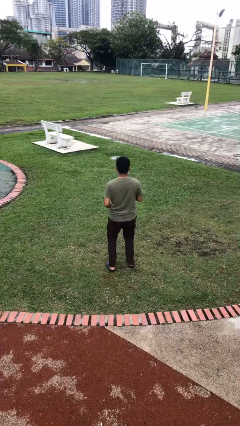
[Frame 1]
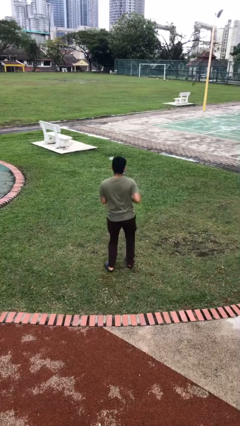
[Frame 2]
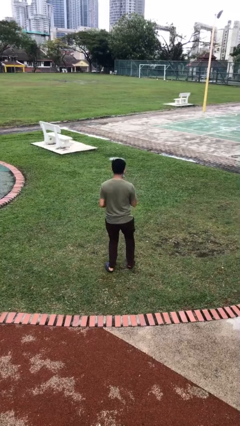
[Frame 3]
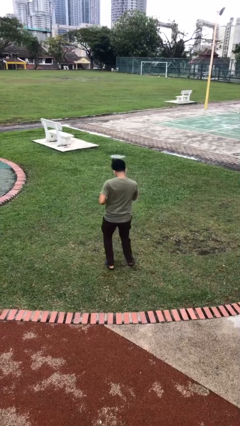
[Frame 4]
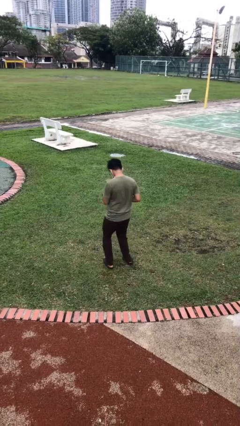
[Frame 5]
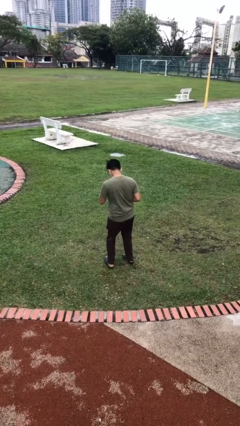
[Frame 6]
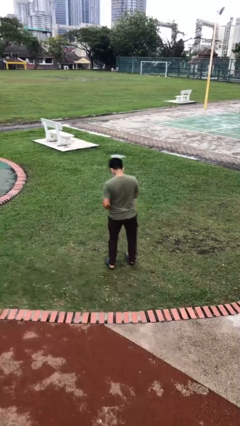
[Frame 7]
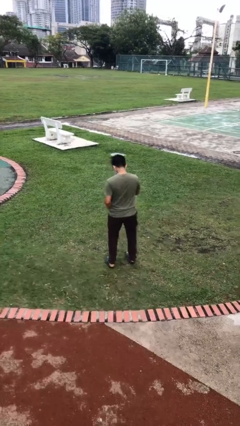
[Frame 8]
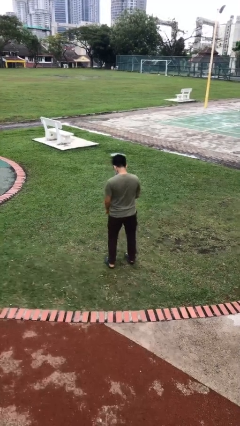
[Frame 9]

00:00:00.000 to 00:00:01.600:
person dances in place

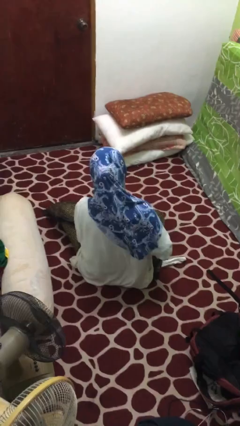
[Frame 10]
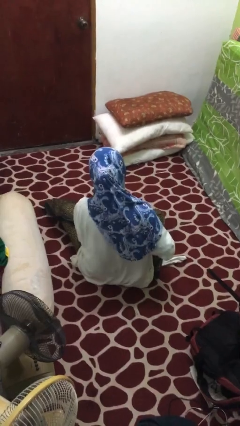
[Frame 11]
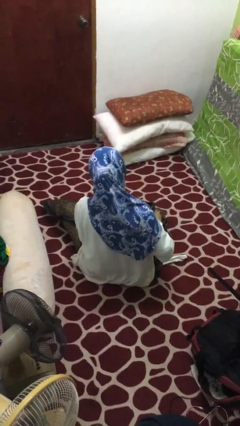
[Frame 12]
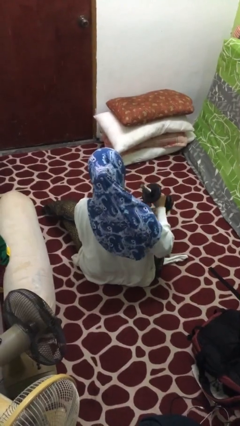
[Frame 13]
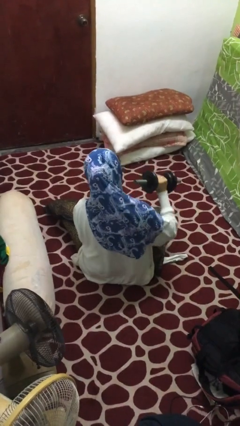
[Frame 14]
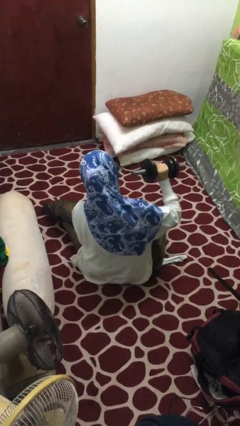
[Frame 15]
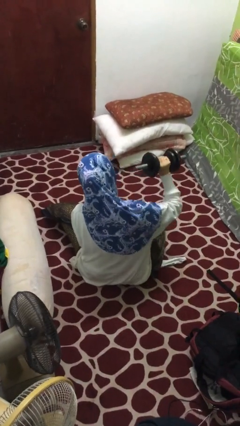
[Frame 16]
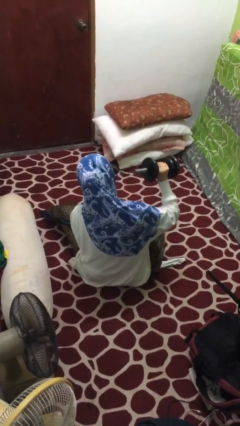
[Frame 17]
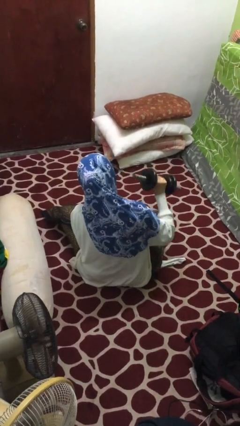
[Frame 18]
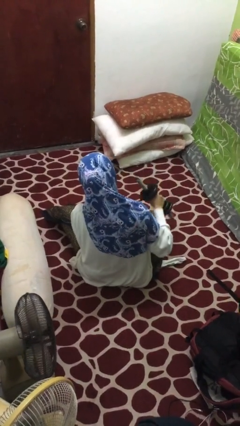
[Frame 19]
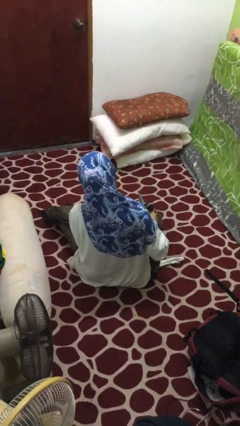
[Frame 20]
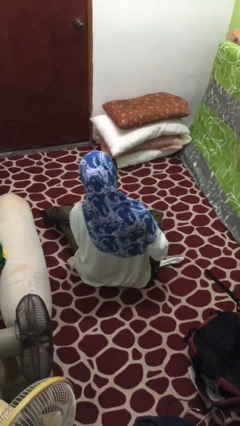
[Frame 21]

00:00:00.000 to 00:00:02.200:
person lifts dumbbells

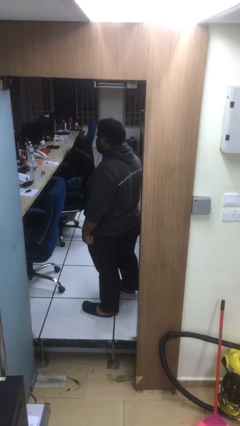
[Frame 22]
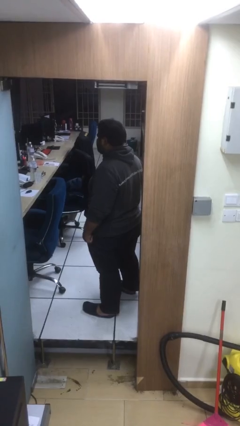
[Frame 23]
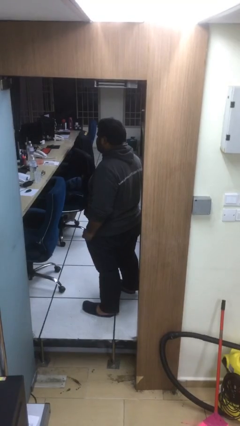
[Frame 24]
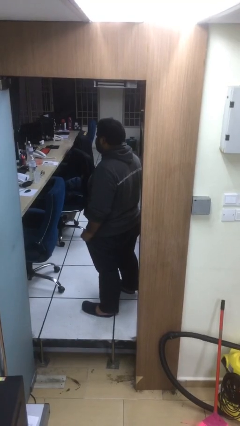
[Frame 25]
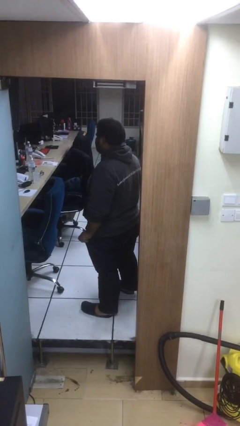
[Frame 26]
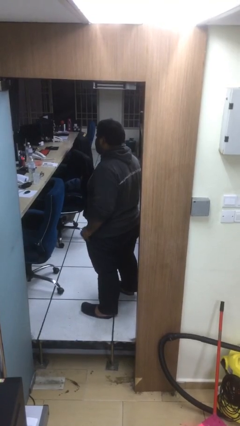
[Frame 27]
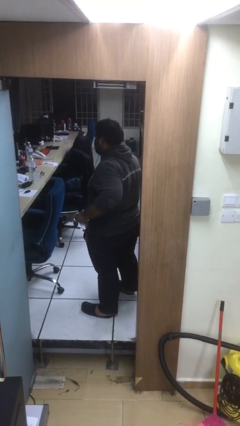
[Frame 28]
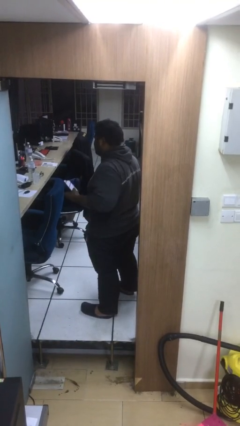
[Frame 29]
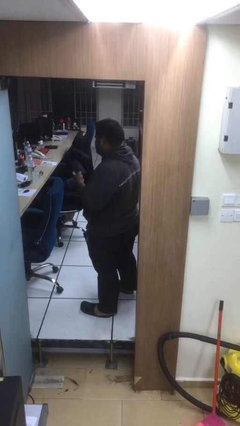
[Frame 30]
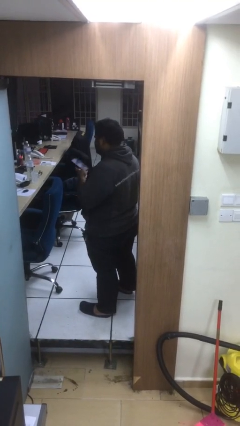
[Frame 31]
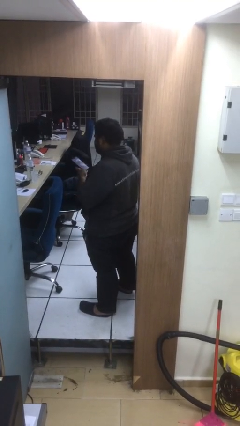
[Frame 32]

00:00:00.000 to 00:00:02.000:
person takes phone from pocket

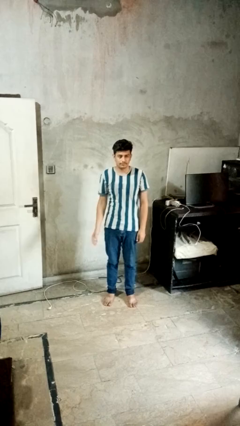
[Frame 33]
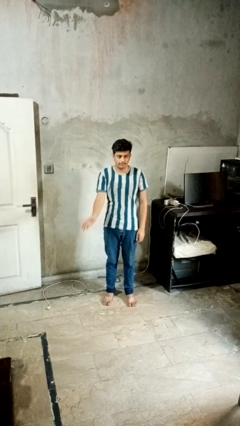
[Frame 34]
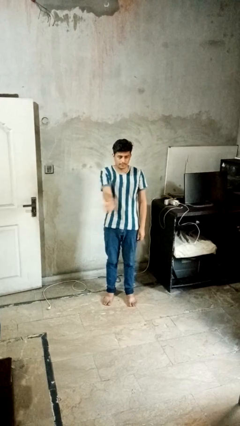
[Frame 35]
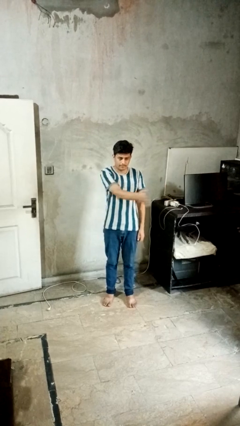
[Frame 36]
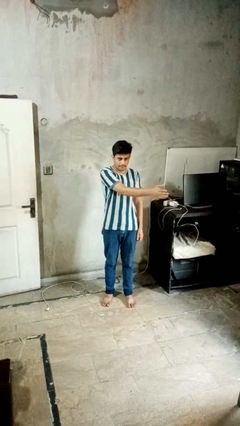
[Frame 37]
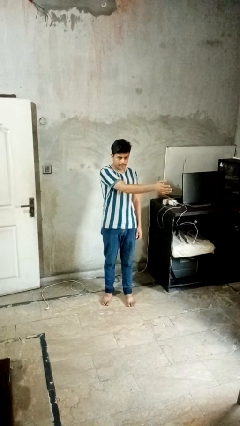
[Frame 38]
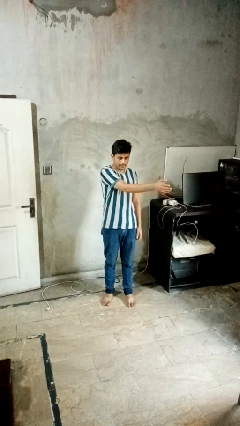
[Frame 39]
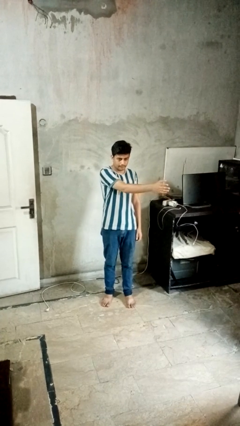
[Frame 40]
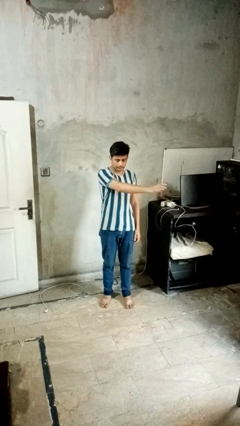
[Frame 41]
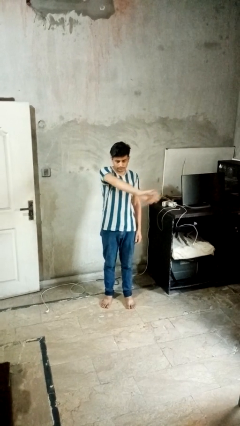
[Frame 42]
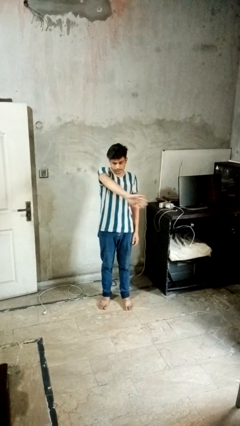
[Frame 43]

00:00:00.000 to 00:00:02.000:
person gestures swipe left

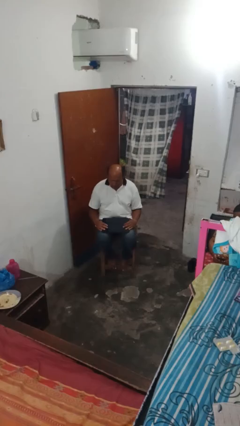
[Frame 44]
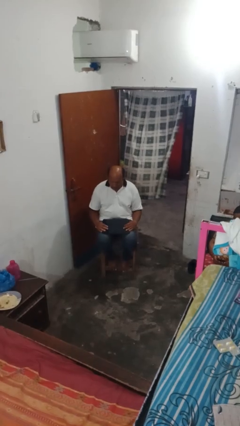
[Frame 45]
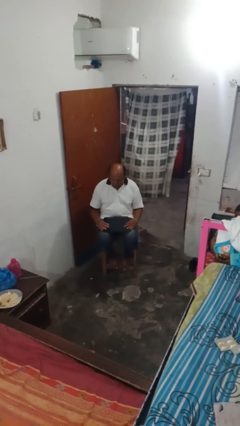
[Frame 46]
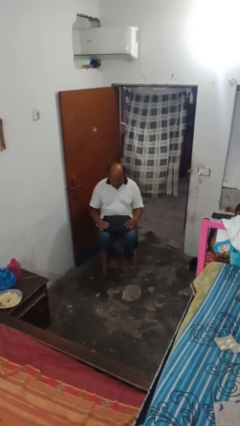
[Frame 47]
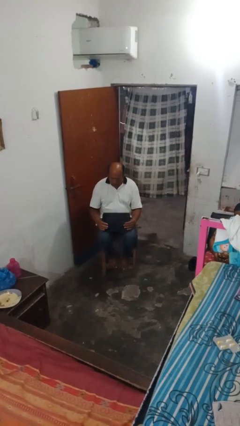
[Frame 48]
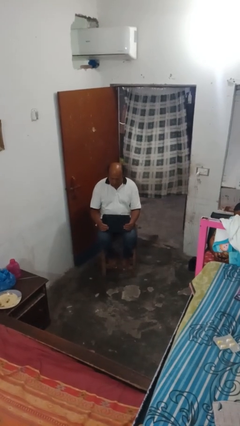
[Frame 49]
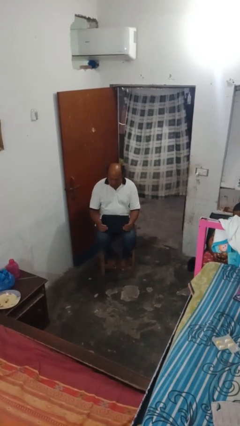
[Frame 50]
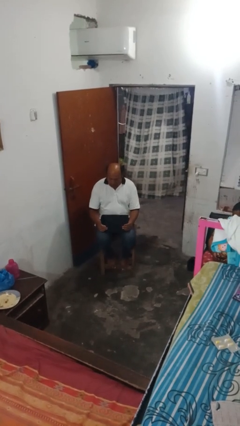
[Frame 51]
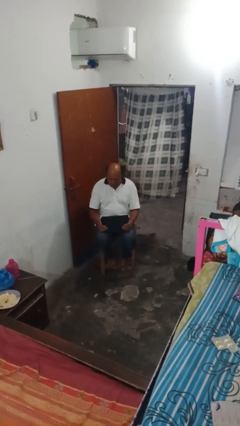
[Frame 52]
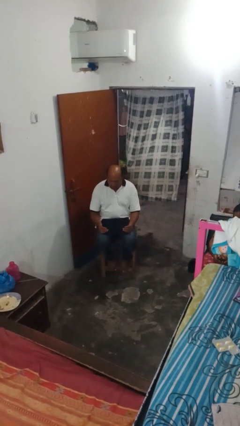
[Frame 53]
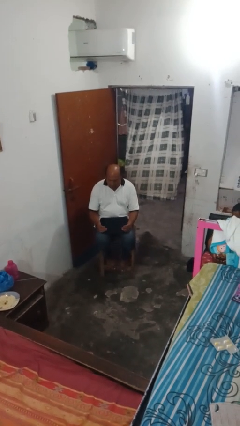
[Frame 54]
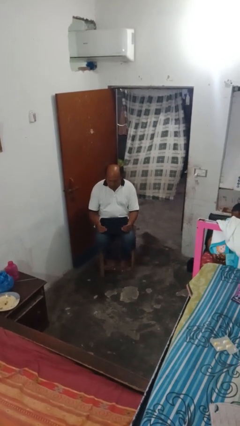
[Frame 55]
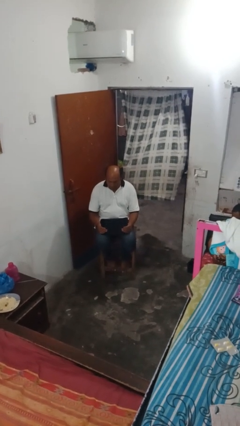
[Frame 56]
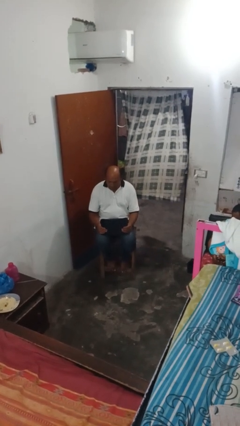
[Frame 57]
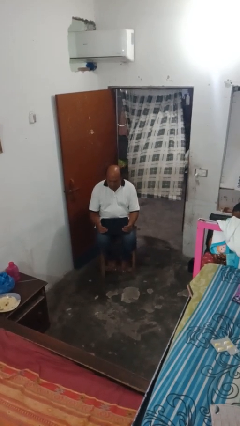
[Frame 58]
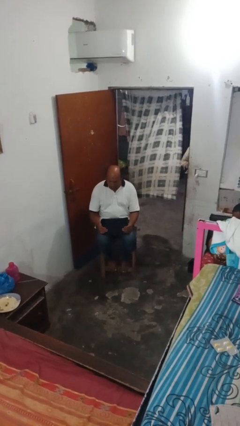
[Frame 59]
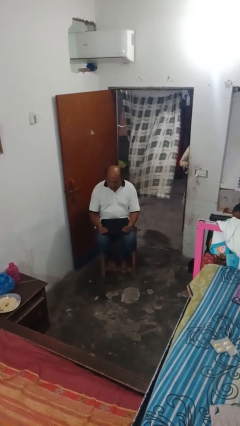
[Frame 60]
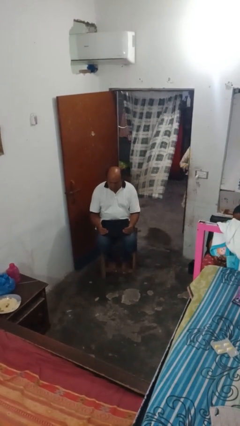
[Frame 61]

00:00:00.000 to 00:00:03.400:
person opens laptop

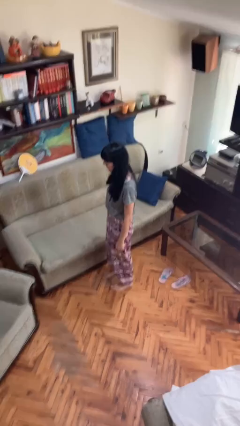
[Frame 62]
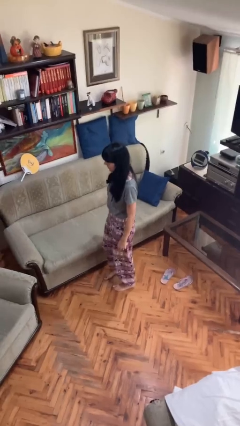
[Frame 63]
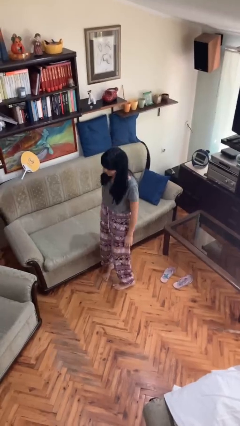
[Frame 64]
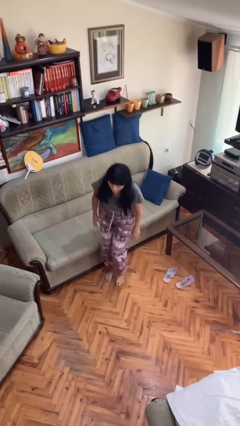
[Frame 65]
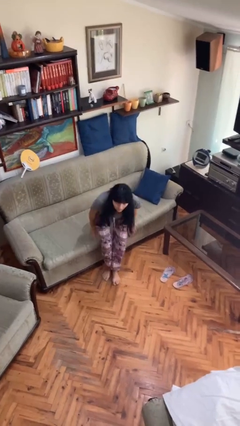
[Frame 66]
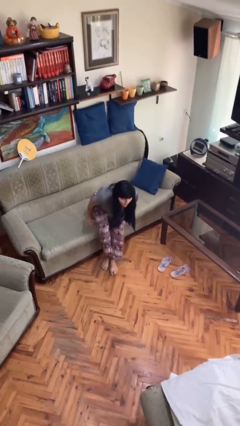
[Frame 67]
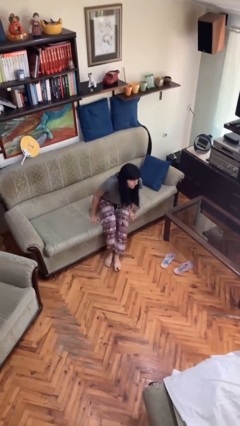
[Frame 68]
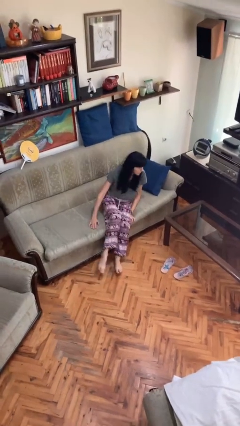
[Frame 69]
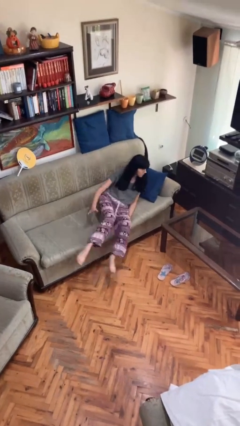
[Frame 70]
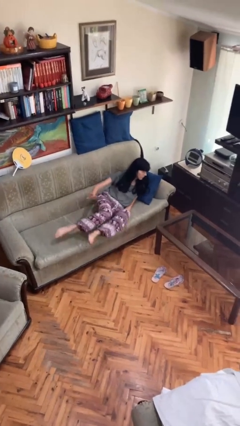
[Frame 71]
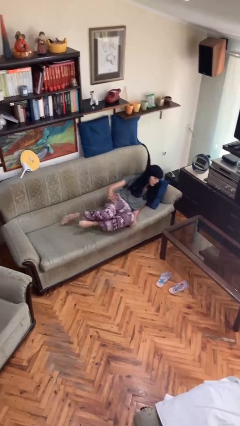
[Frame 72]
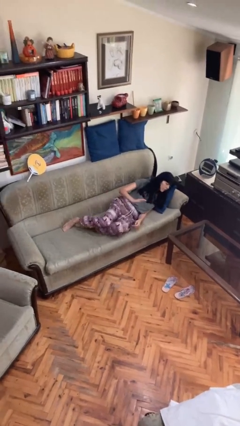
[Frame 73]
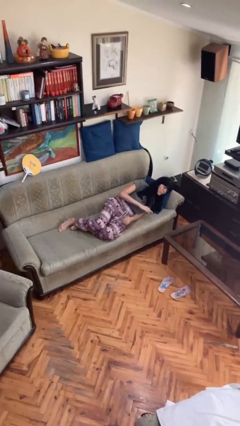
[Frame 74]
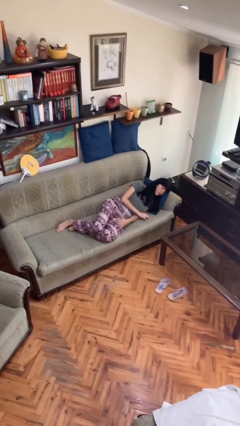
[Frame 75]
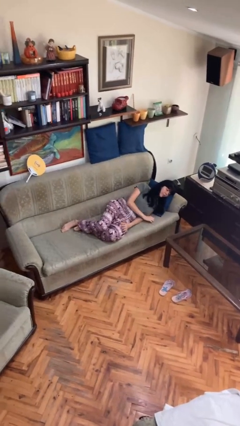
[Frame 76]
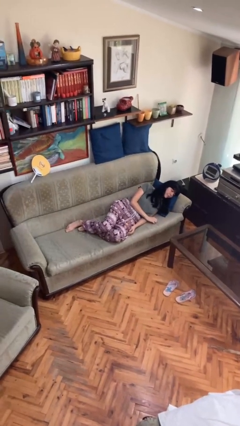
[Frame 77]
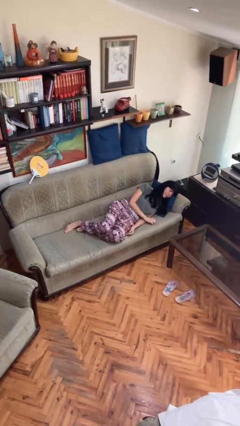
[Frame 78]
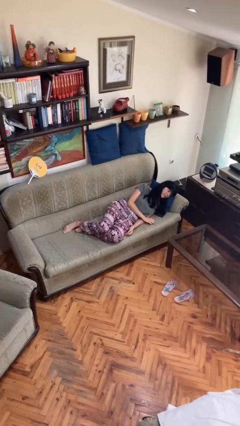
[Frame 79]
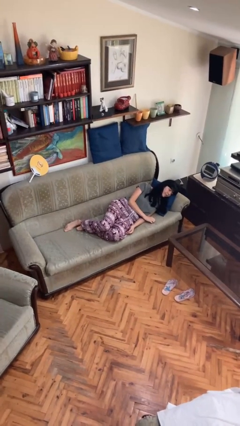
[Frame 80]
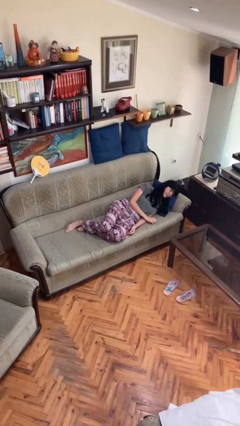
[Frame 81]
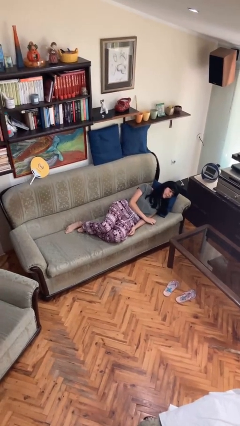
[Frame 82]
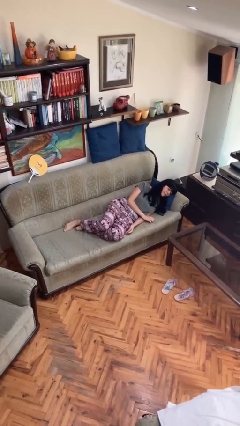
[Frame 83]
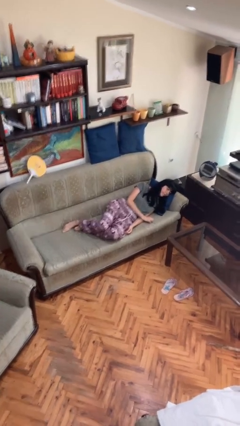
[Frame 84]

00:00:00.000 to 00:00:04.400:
person lies down on couch

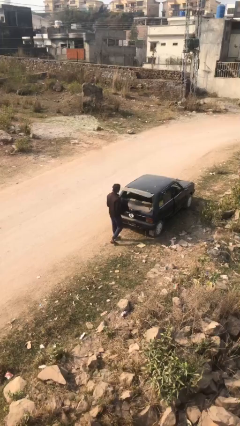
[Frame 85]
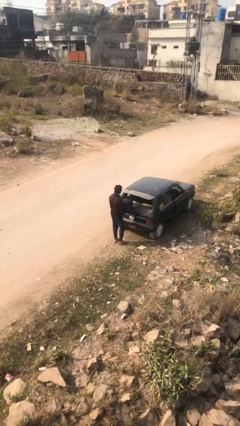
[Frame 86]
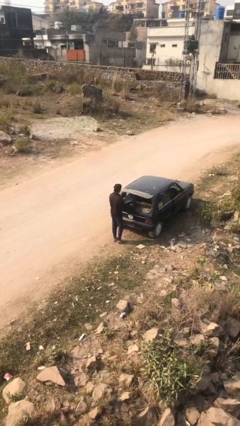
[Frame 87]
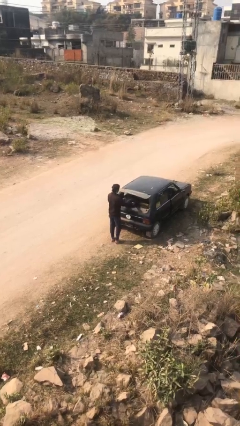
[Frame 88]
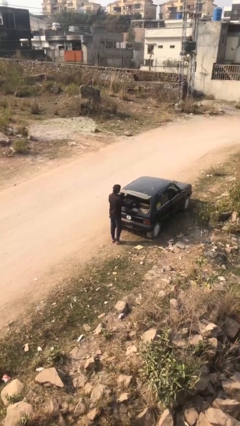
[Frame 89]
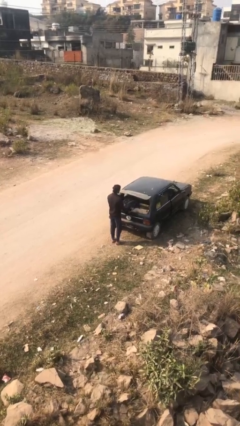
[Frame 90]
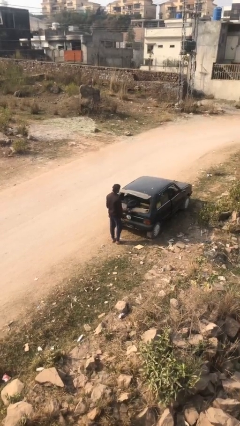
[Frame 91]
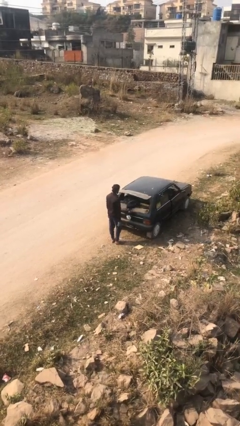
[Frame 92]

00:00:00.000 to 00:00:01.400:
person loads car
